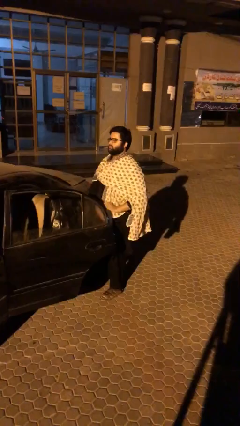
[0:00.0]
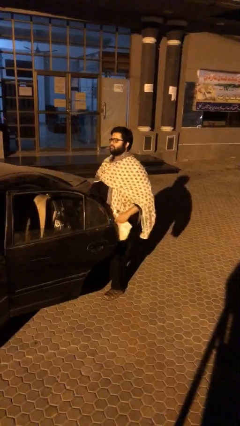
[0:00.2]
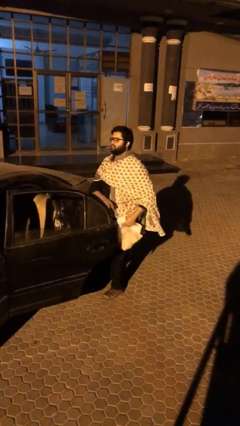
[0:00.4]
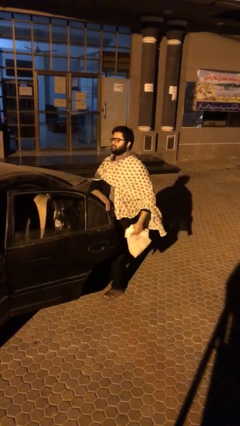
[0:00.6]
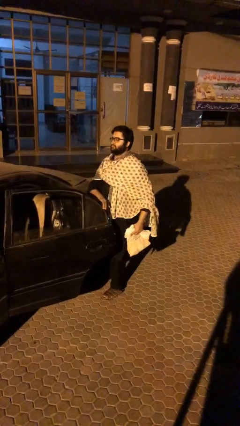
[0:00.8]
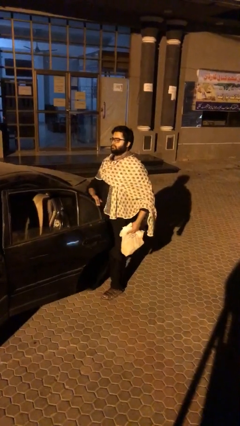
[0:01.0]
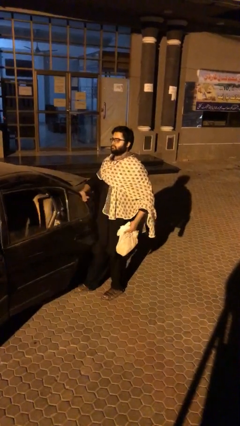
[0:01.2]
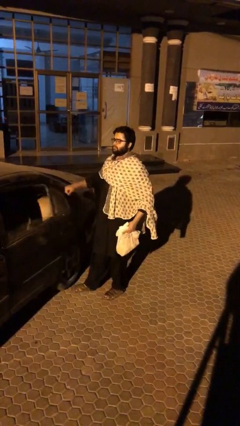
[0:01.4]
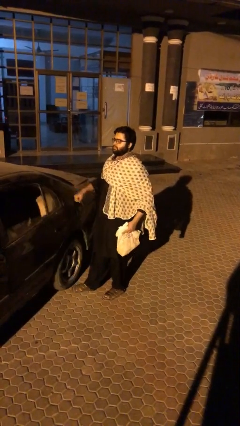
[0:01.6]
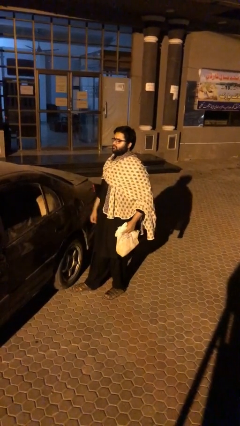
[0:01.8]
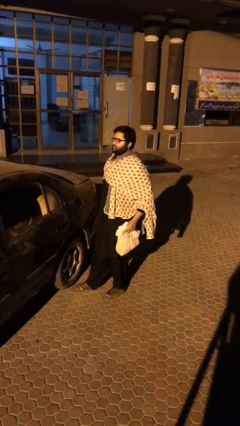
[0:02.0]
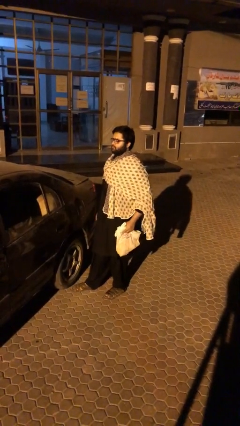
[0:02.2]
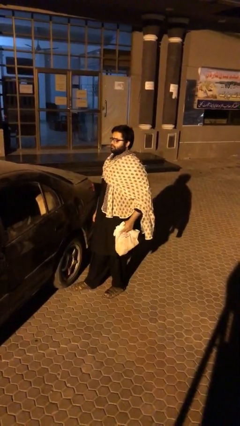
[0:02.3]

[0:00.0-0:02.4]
person closes car door

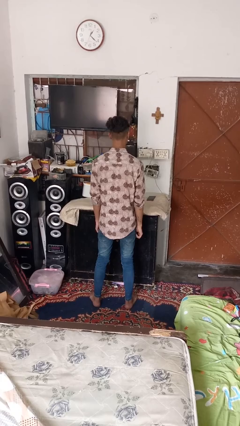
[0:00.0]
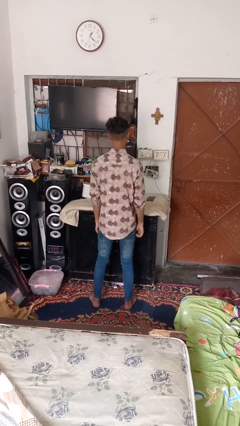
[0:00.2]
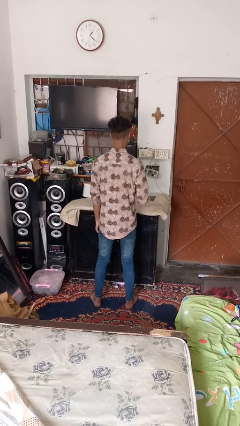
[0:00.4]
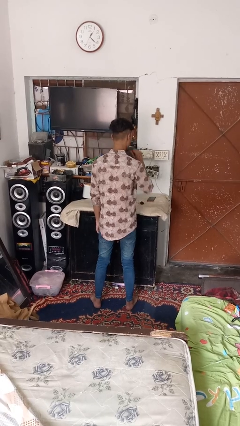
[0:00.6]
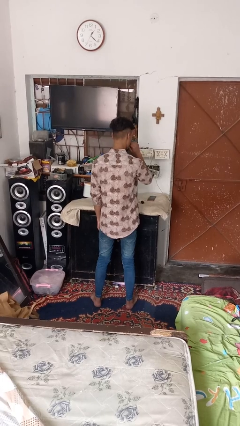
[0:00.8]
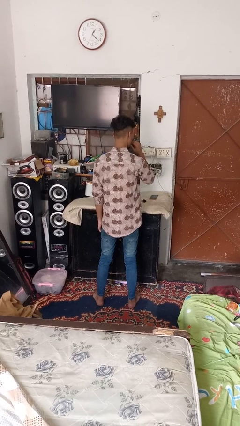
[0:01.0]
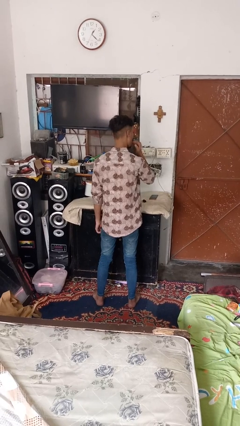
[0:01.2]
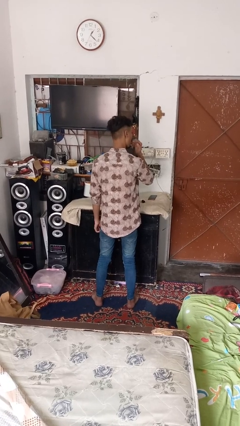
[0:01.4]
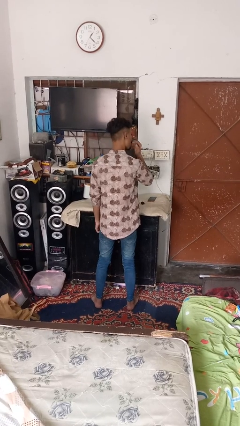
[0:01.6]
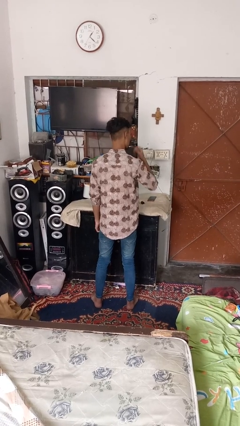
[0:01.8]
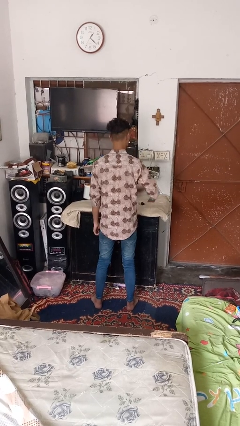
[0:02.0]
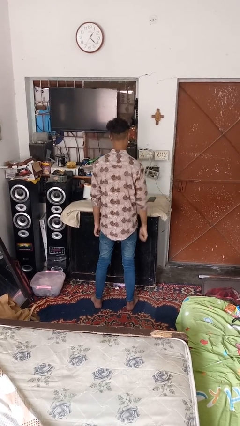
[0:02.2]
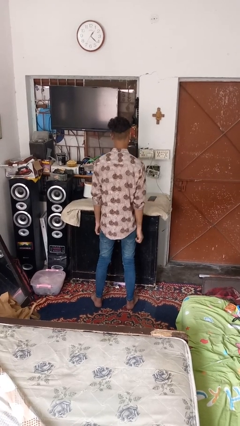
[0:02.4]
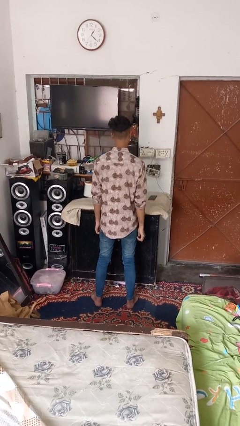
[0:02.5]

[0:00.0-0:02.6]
person licks fingers

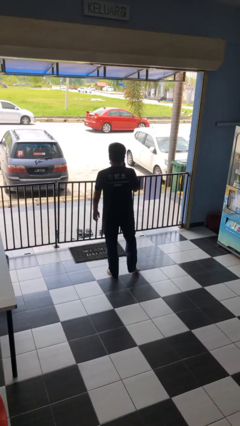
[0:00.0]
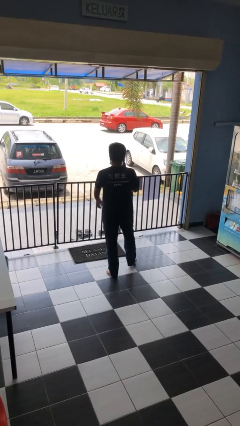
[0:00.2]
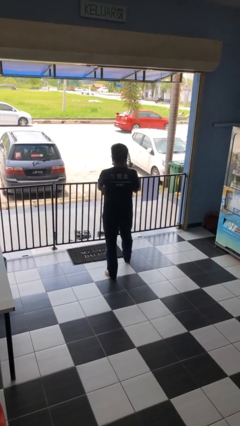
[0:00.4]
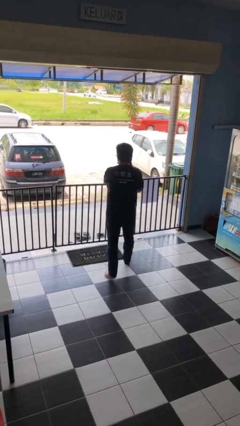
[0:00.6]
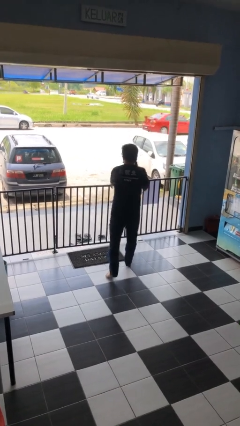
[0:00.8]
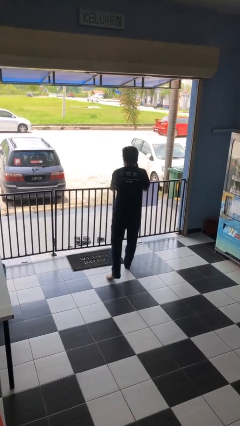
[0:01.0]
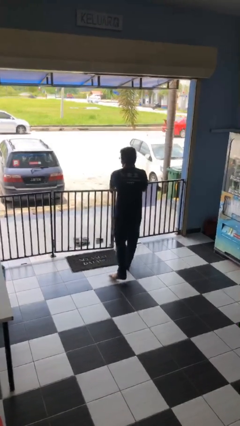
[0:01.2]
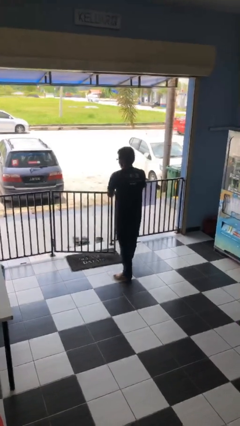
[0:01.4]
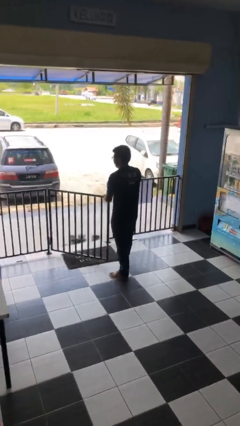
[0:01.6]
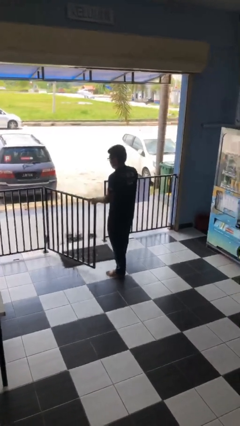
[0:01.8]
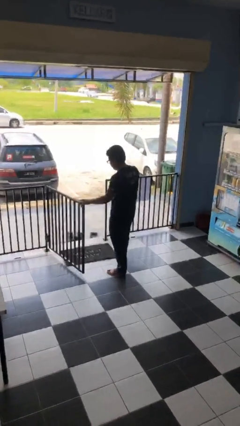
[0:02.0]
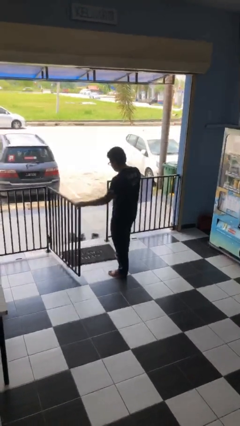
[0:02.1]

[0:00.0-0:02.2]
person opens facility door

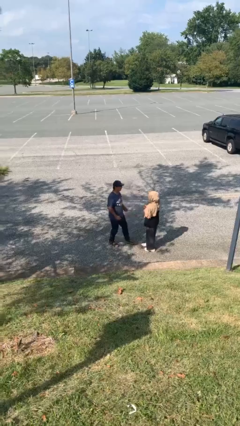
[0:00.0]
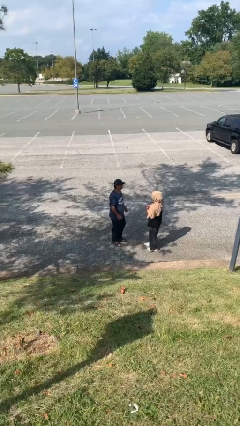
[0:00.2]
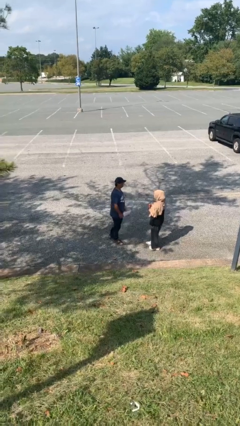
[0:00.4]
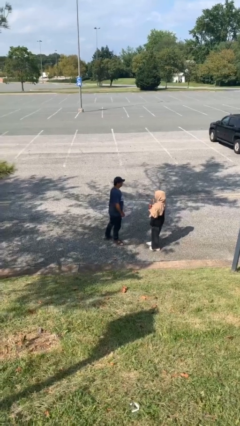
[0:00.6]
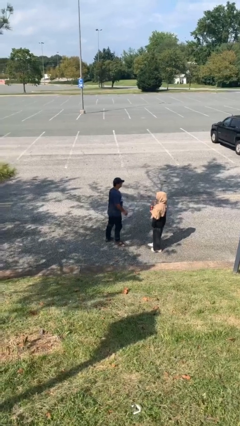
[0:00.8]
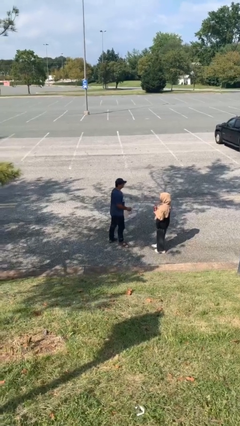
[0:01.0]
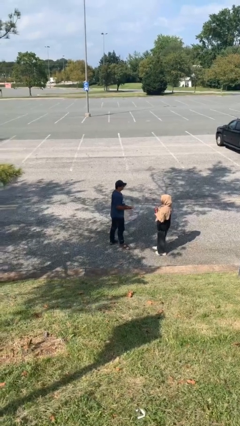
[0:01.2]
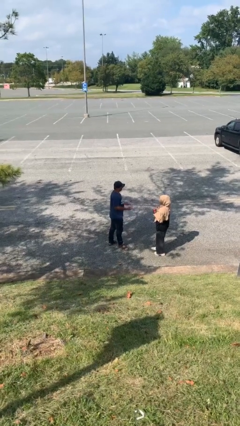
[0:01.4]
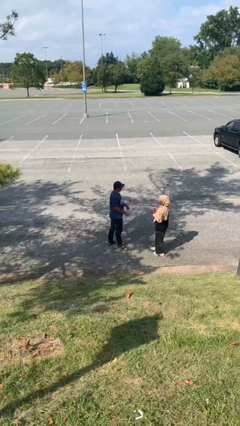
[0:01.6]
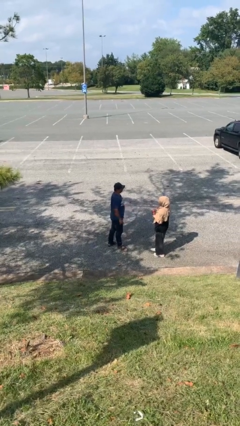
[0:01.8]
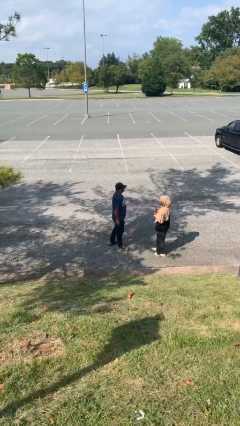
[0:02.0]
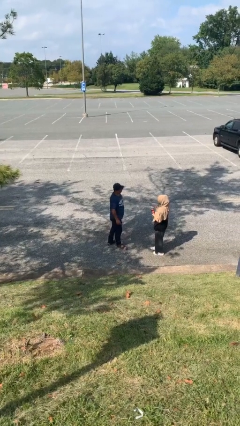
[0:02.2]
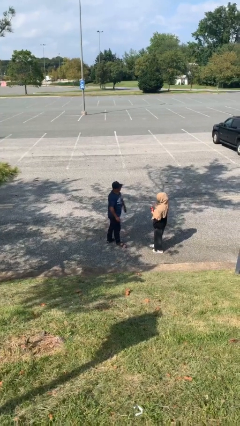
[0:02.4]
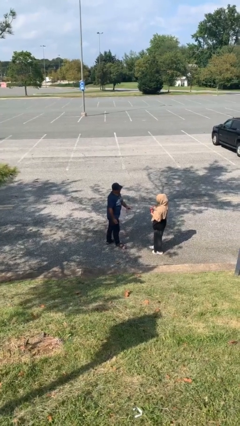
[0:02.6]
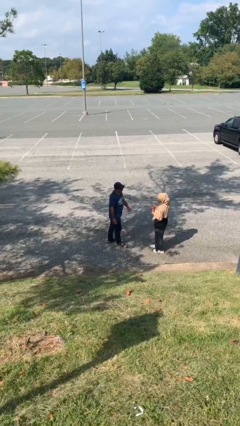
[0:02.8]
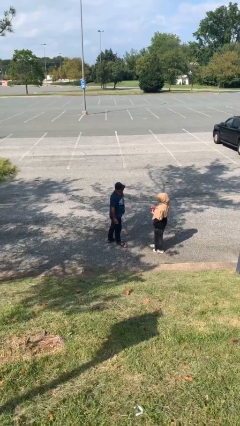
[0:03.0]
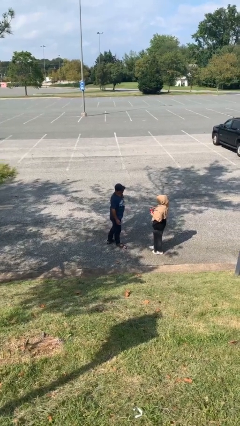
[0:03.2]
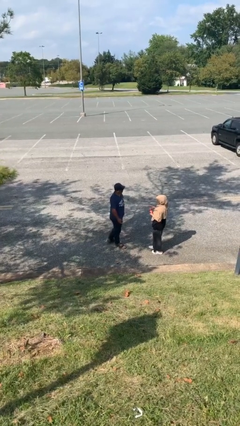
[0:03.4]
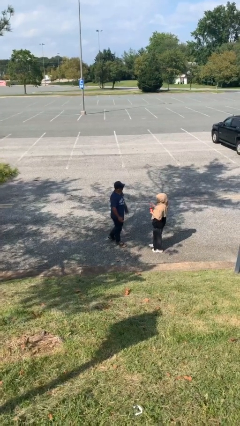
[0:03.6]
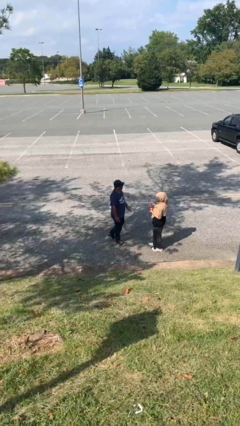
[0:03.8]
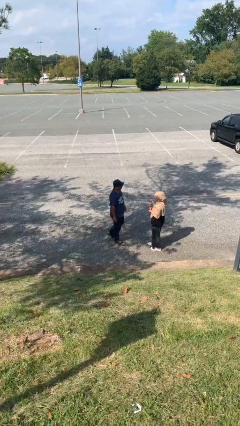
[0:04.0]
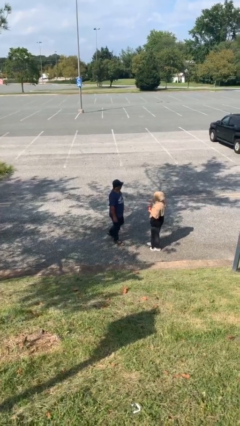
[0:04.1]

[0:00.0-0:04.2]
person talks to person

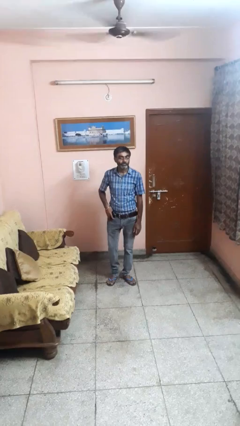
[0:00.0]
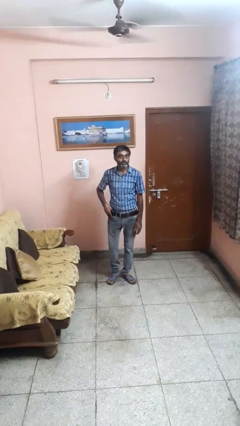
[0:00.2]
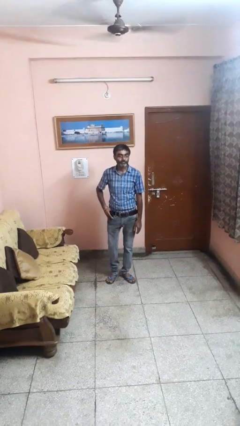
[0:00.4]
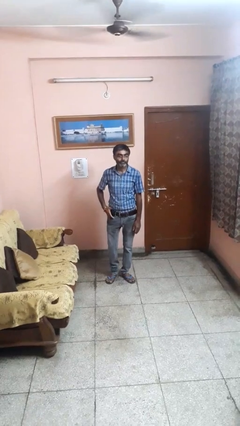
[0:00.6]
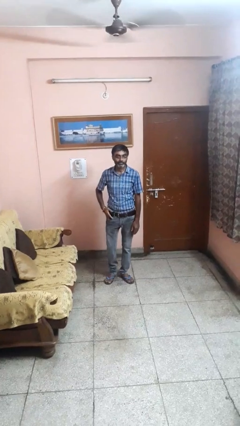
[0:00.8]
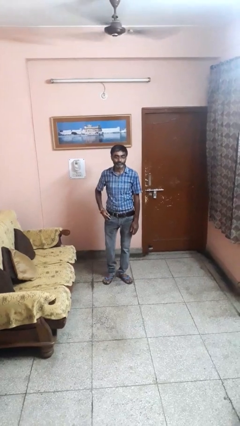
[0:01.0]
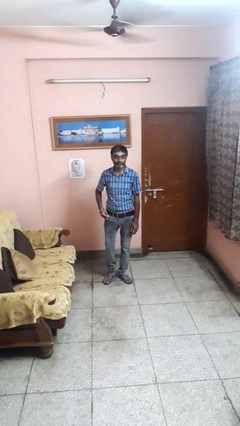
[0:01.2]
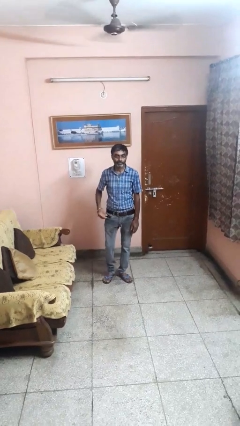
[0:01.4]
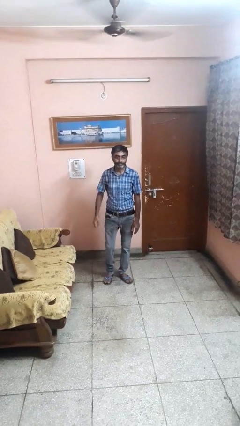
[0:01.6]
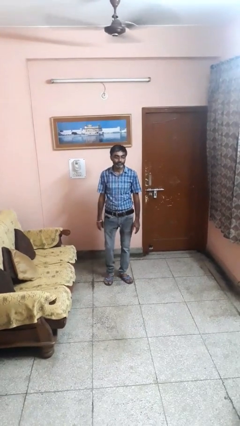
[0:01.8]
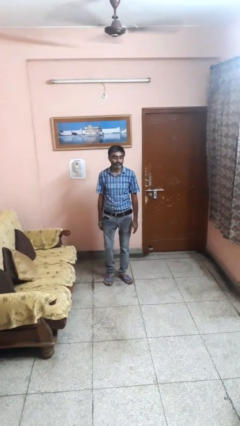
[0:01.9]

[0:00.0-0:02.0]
person puts phone into pocket

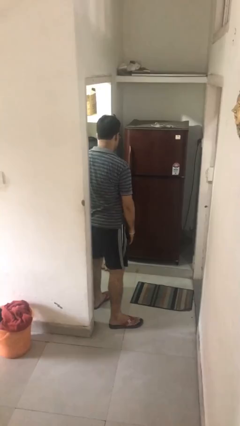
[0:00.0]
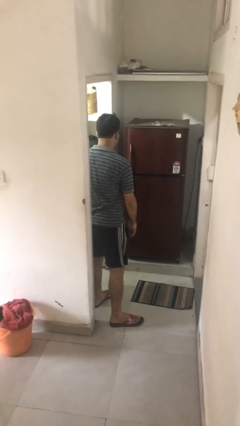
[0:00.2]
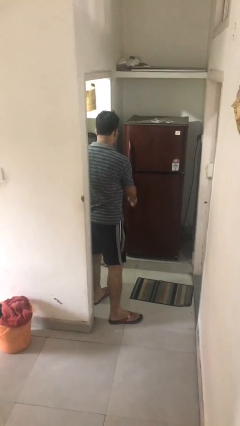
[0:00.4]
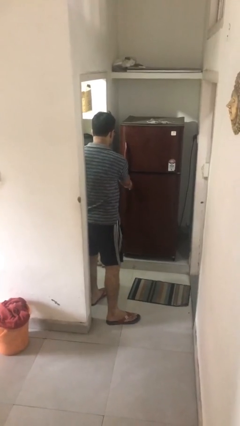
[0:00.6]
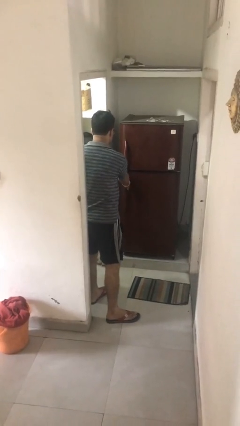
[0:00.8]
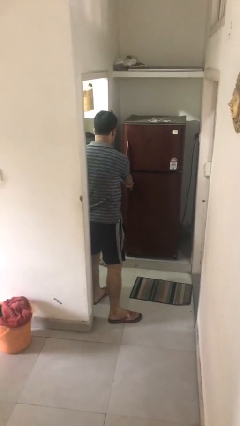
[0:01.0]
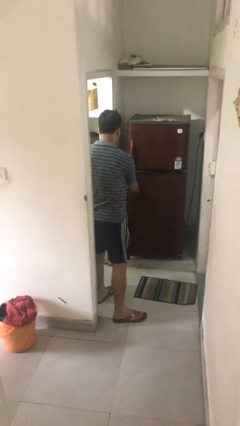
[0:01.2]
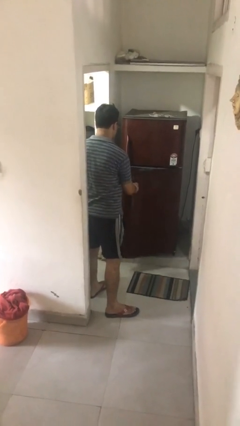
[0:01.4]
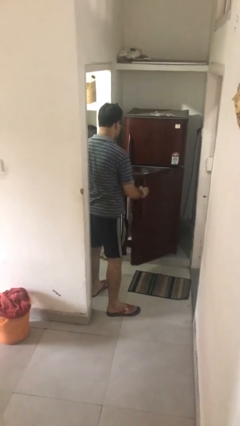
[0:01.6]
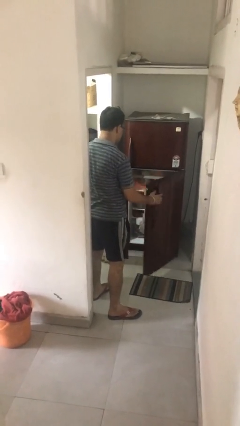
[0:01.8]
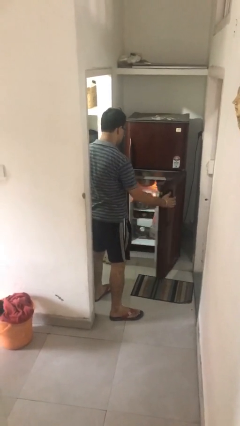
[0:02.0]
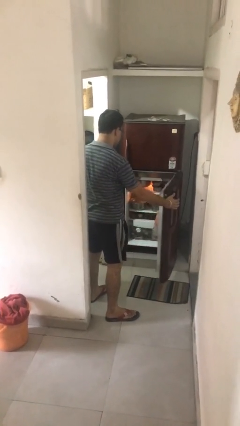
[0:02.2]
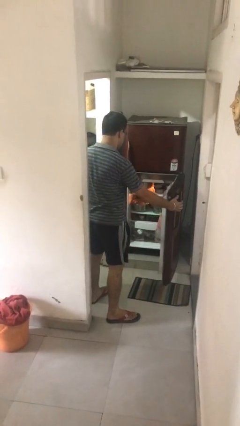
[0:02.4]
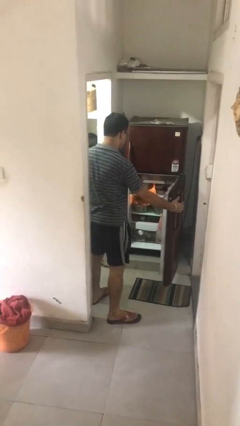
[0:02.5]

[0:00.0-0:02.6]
person opens refrigerator

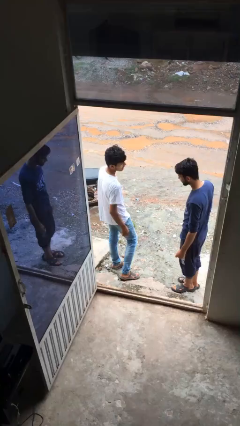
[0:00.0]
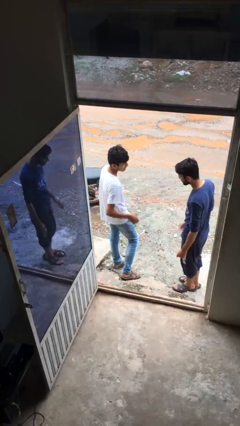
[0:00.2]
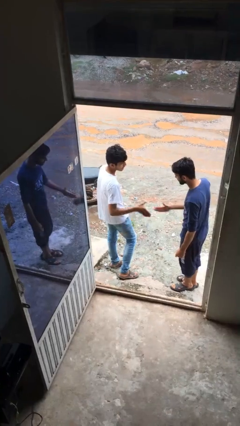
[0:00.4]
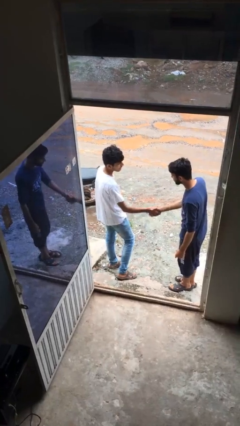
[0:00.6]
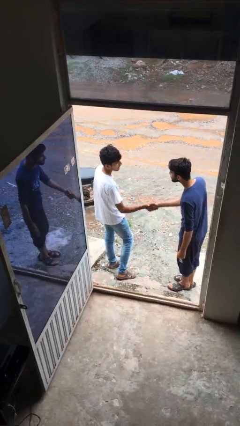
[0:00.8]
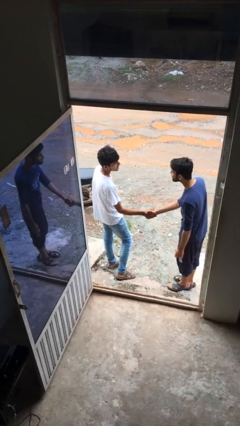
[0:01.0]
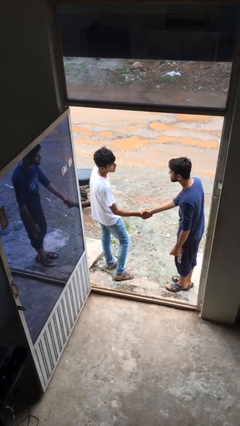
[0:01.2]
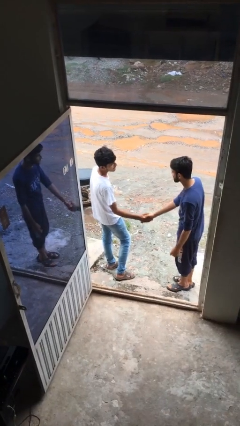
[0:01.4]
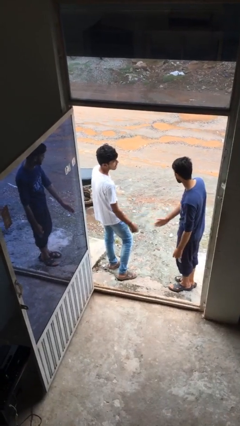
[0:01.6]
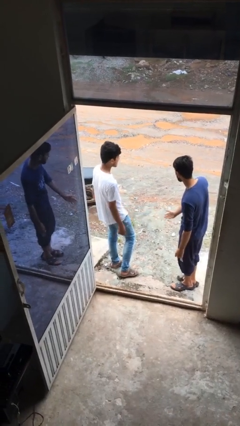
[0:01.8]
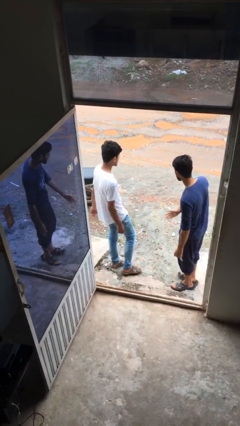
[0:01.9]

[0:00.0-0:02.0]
person shakes hand
